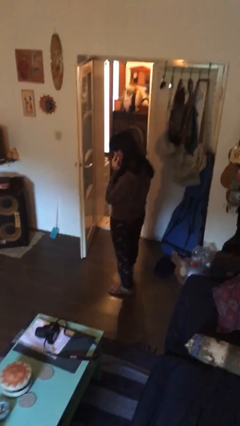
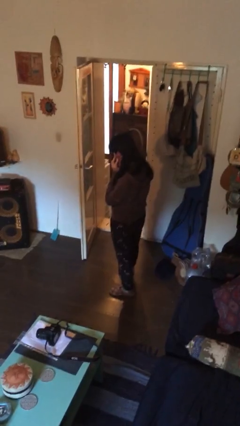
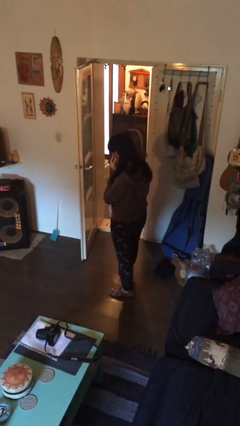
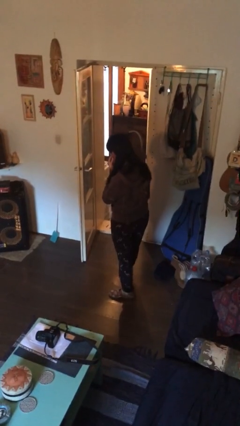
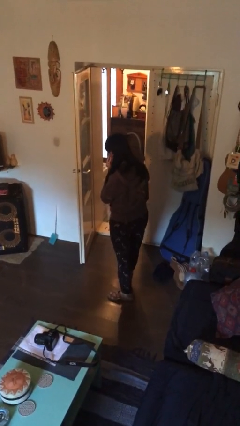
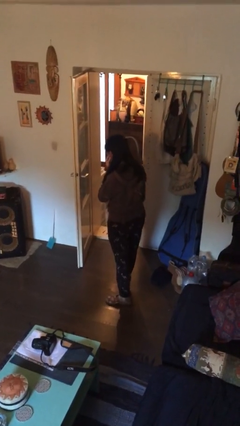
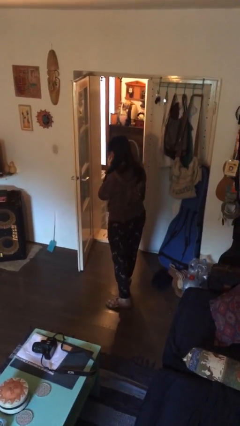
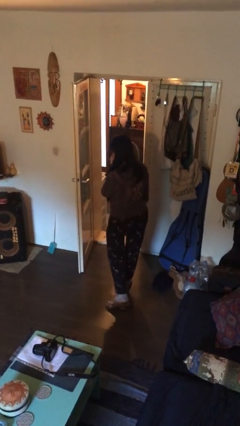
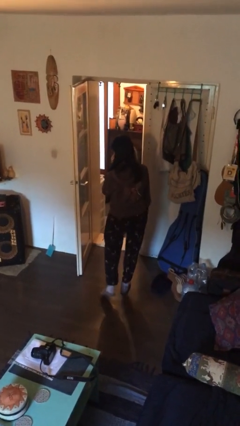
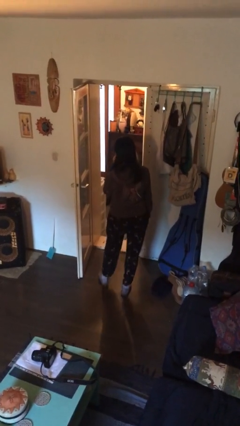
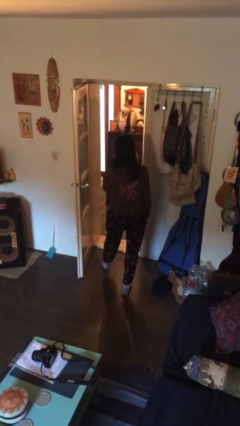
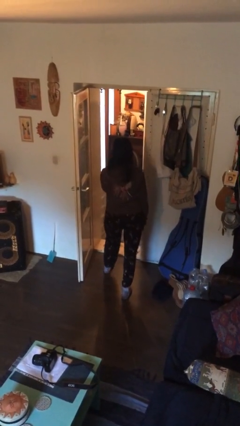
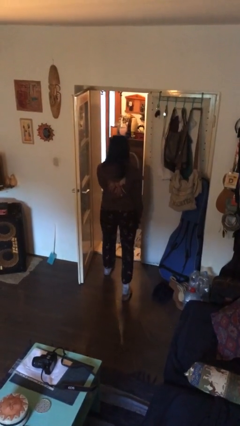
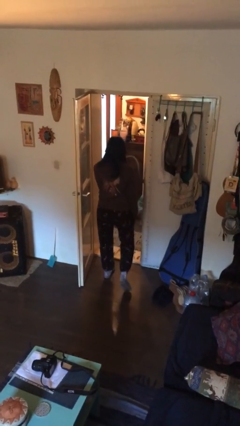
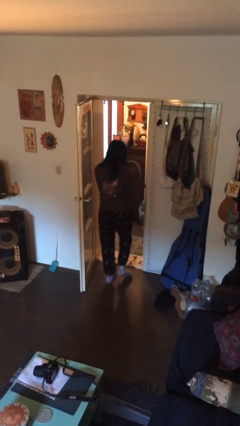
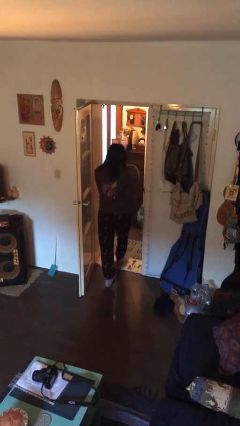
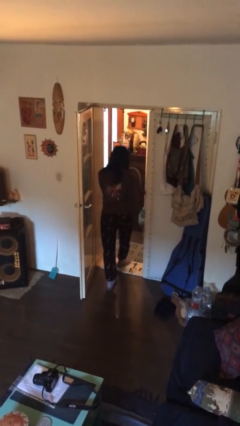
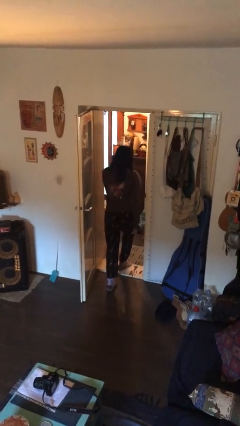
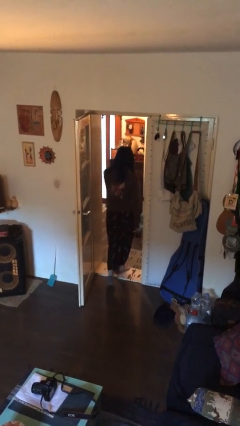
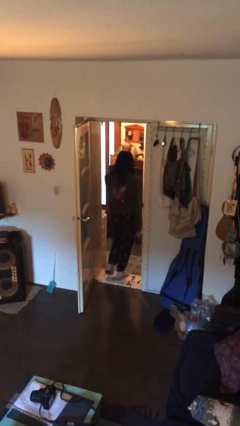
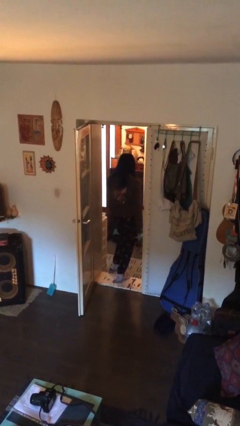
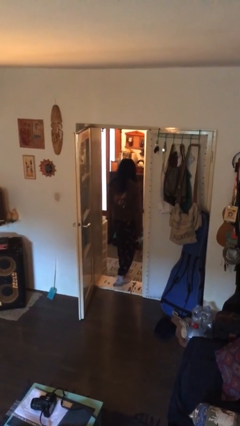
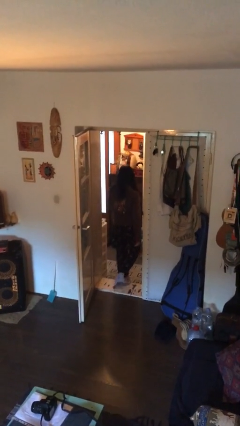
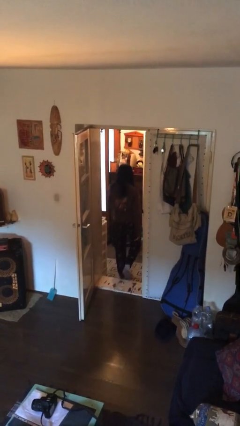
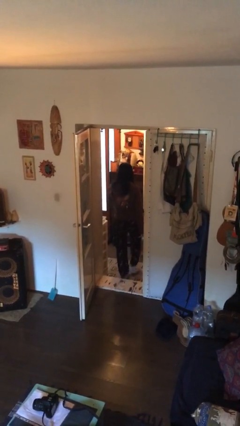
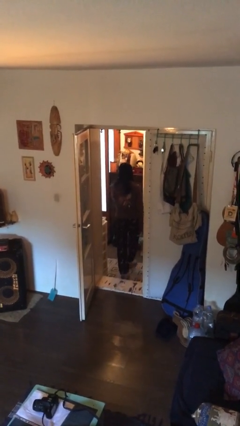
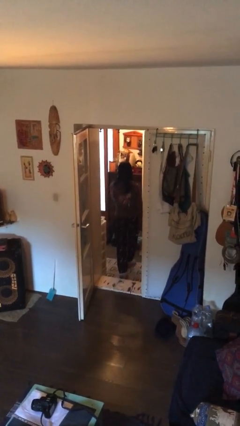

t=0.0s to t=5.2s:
person exits scene through structure

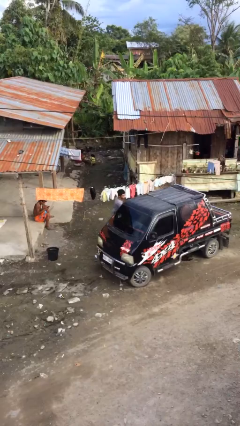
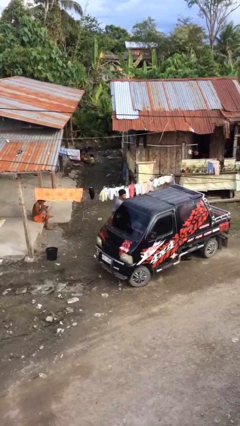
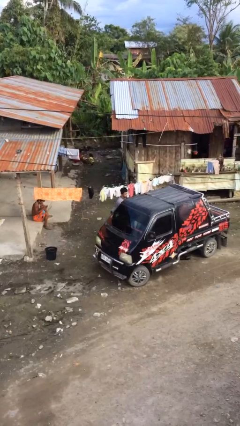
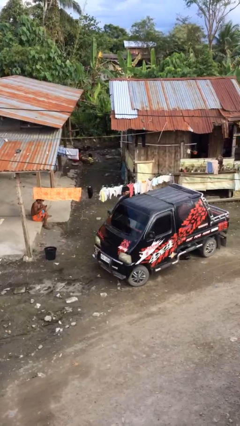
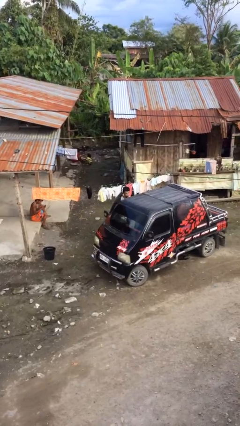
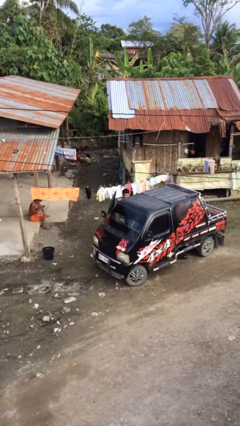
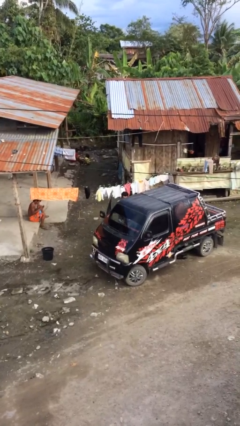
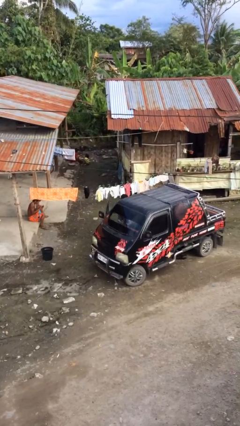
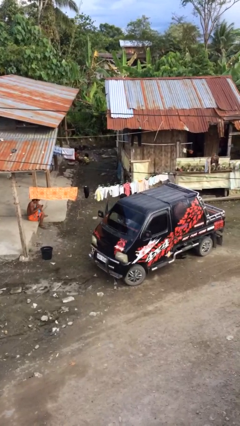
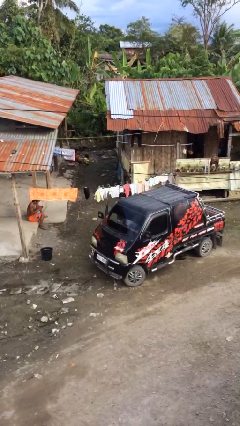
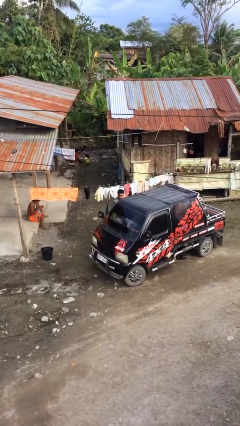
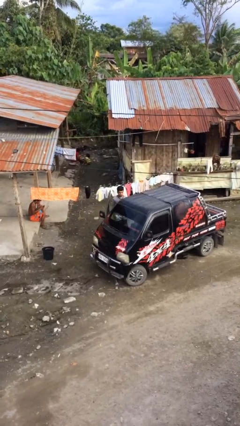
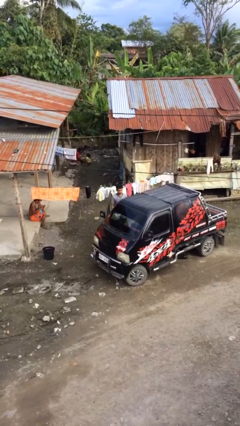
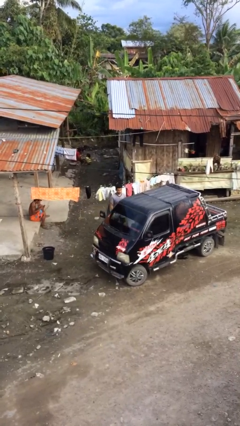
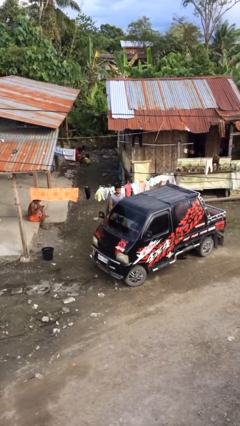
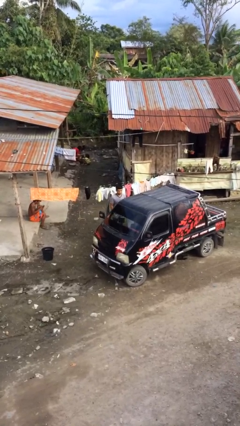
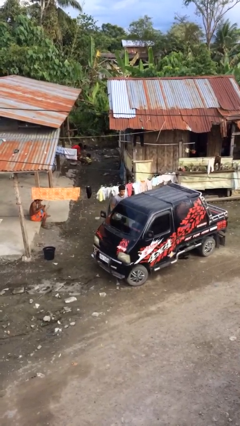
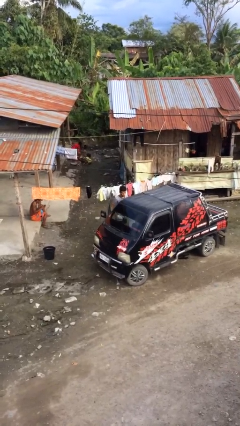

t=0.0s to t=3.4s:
person loads car

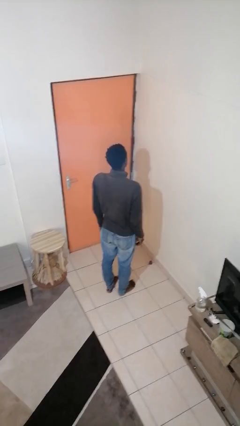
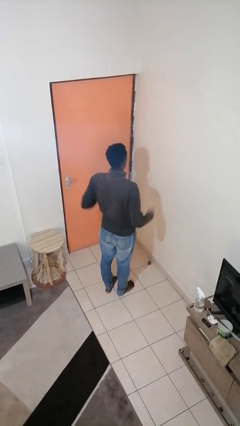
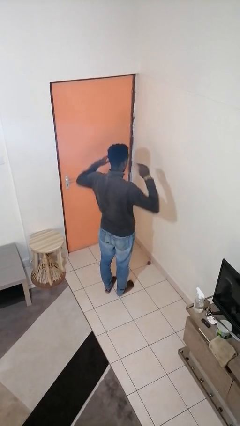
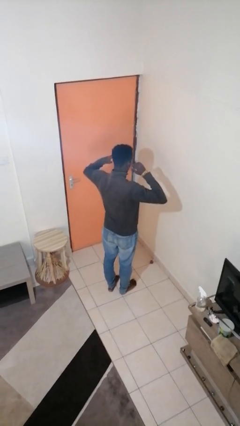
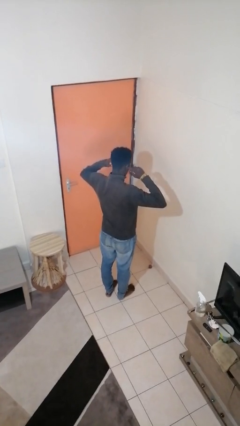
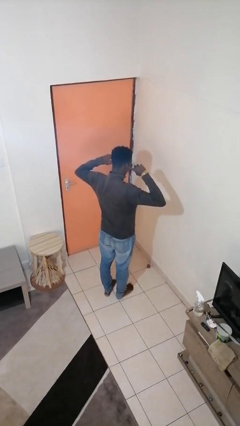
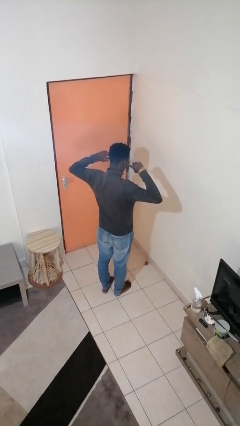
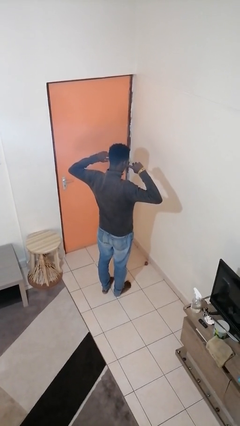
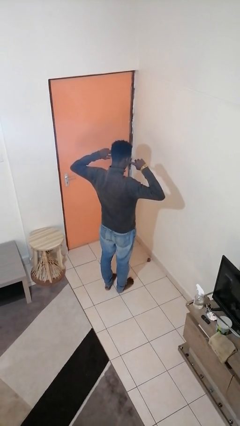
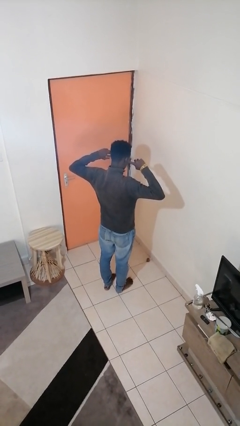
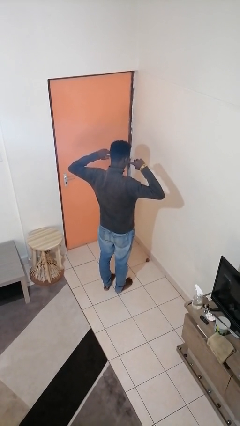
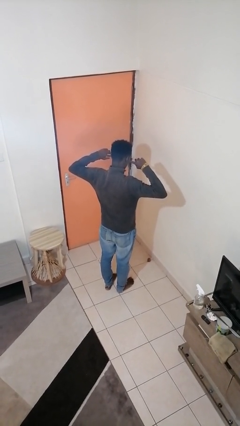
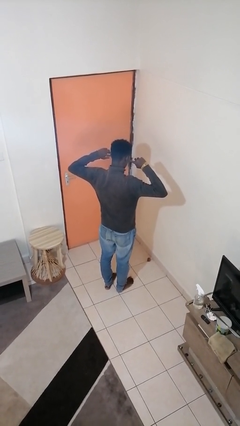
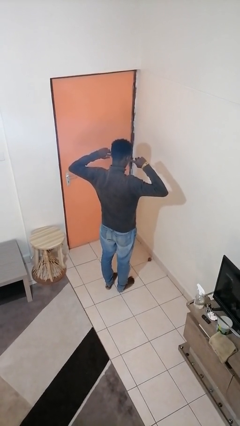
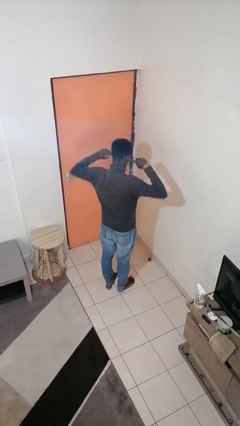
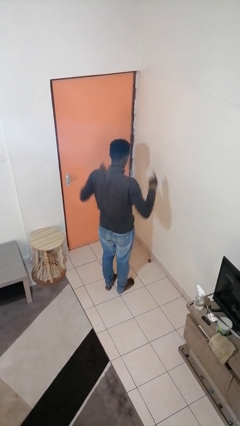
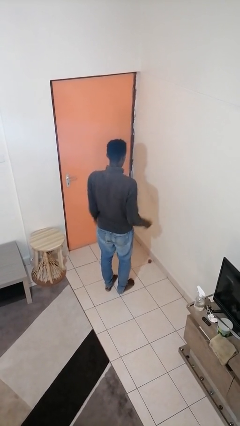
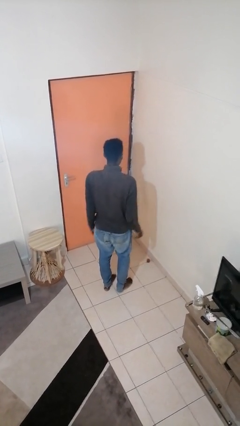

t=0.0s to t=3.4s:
person puts fingers in ear

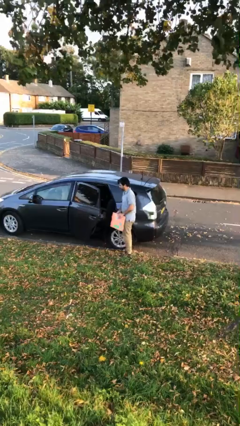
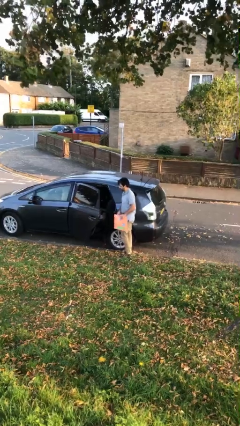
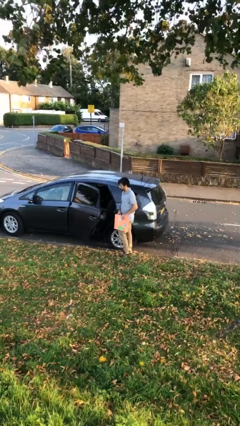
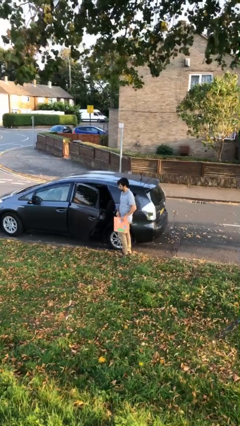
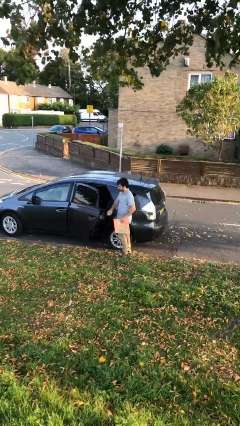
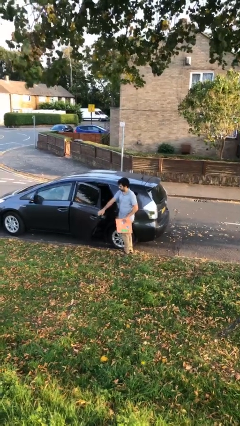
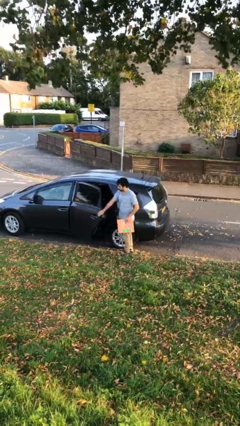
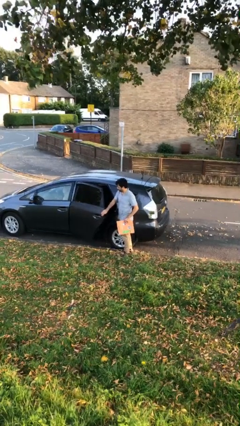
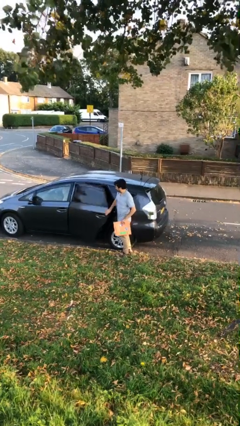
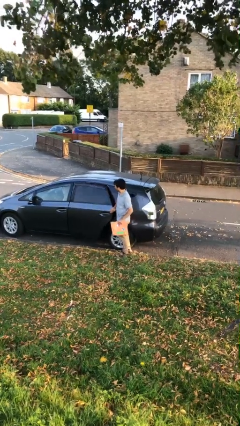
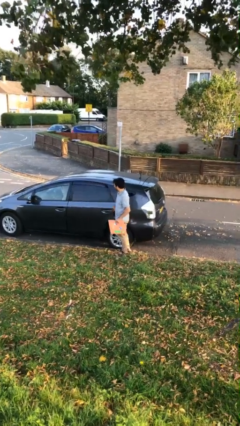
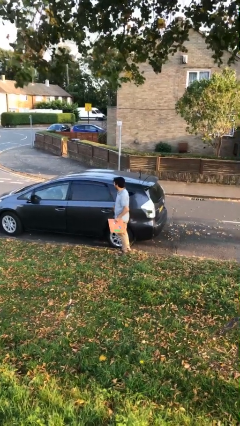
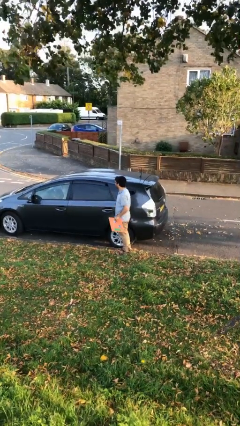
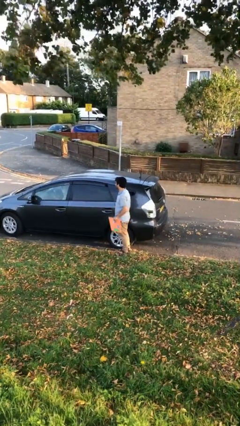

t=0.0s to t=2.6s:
person closes car door

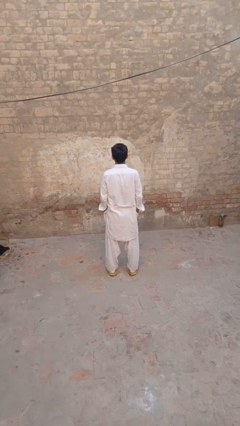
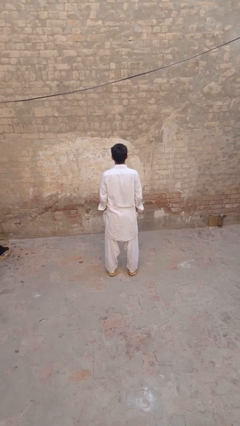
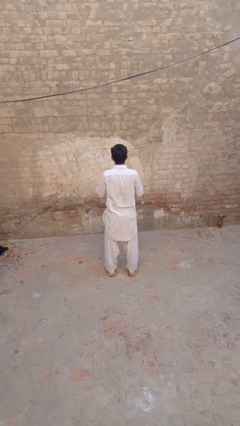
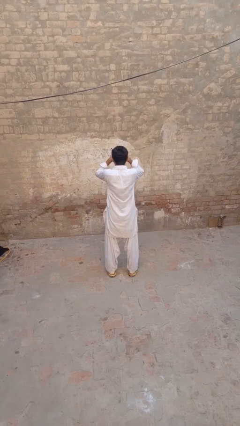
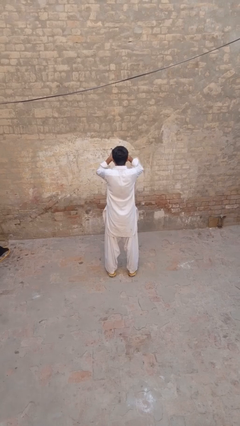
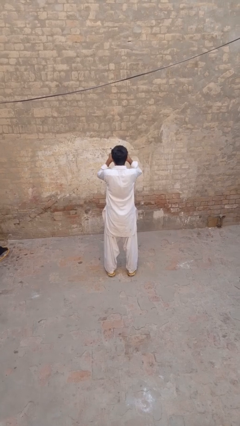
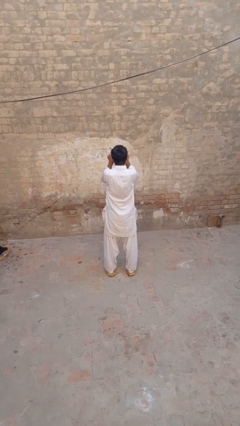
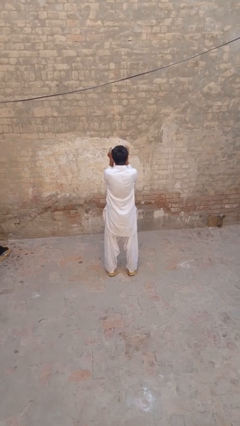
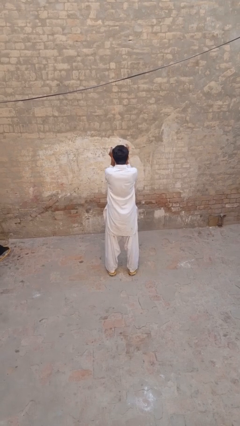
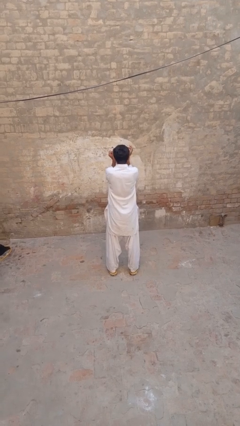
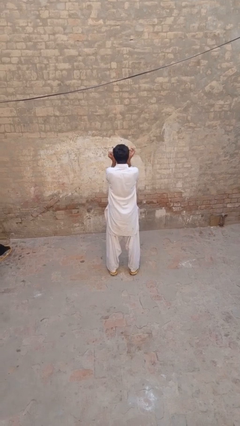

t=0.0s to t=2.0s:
person shades eyes

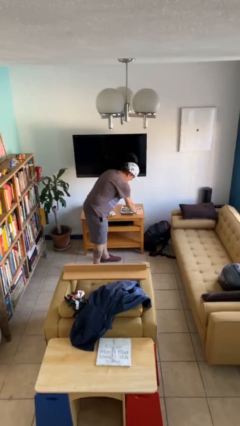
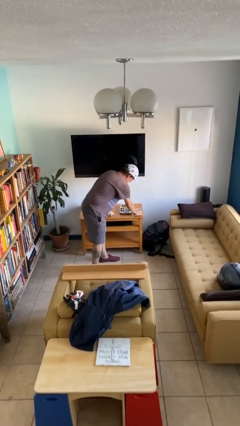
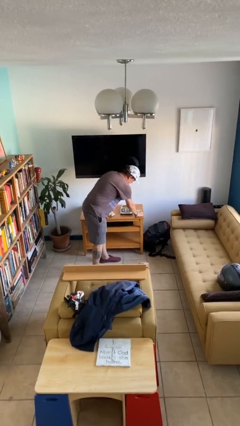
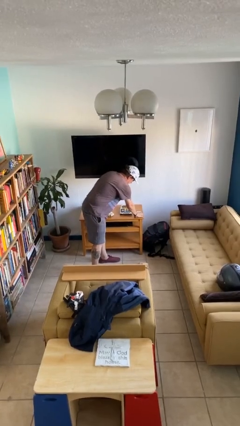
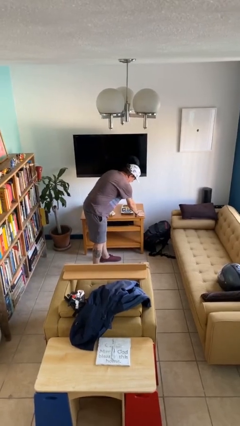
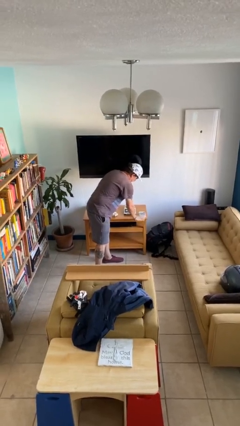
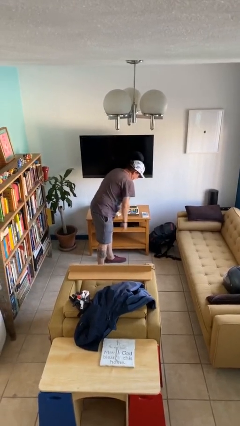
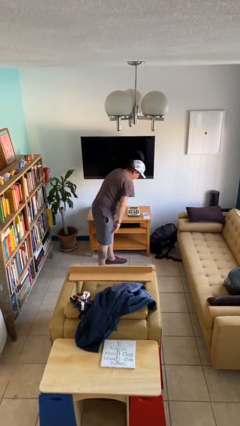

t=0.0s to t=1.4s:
person puts down object on table
